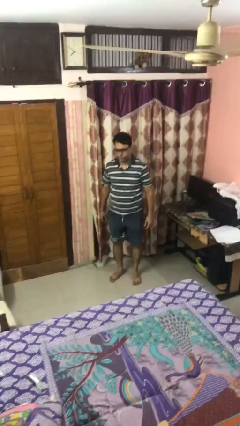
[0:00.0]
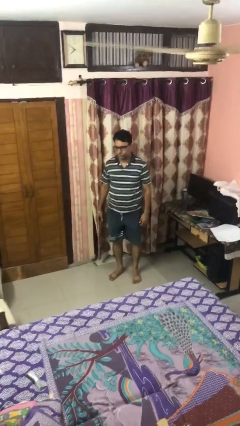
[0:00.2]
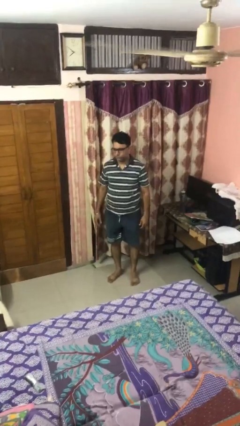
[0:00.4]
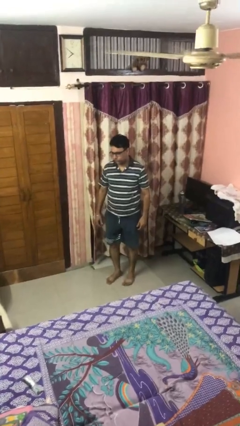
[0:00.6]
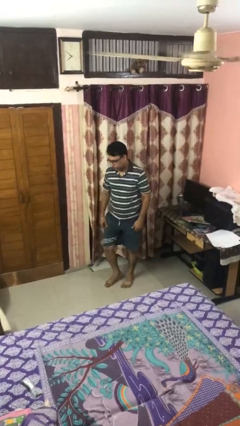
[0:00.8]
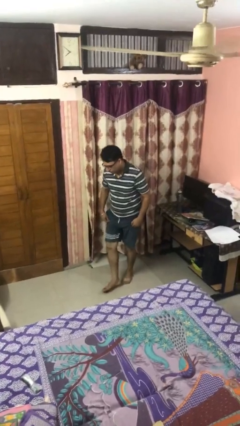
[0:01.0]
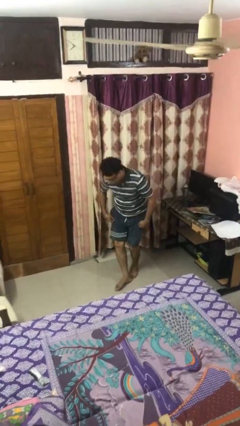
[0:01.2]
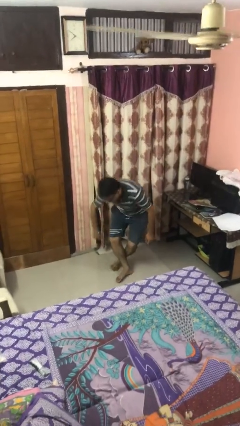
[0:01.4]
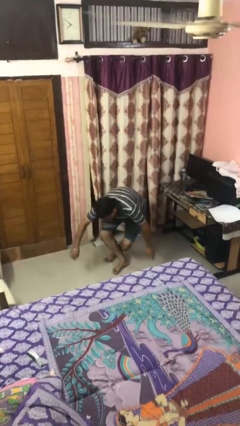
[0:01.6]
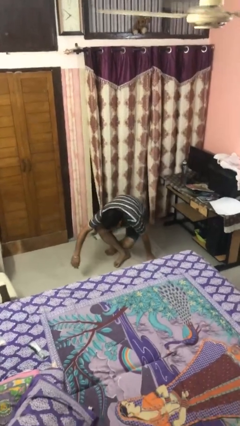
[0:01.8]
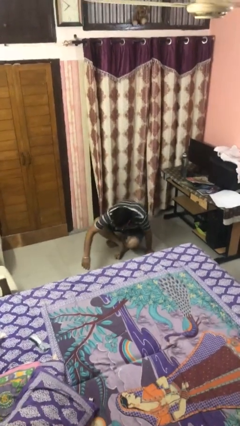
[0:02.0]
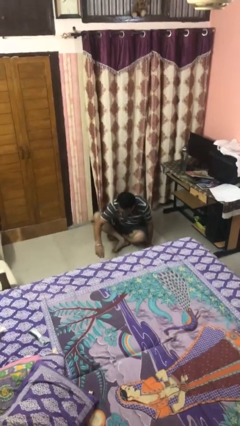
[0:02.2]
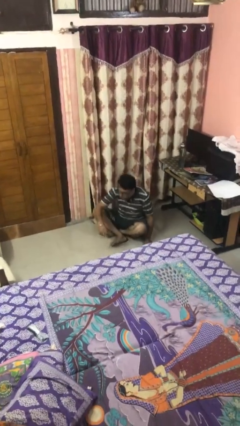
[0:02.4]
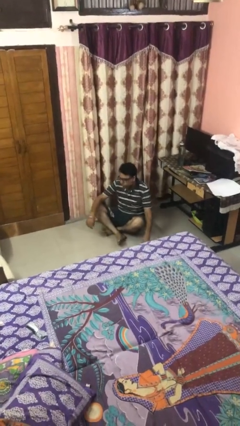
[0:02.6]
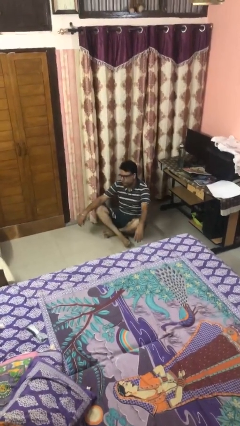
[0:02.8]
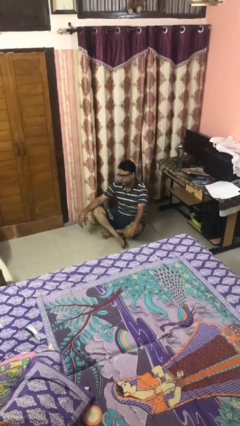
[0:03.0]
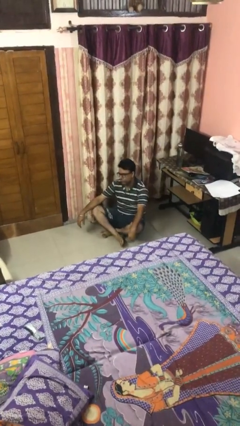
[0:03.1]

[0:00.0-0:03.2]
person sits crisscross

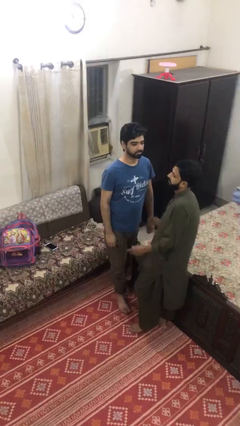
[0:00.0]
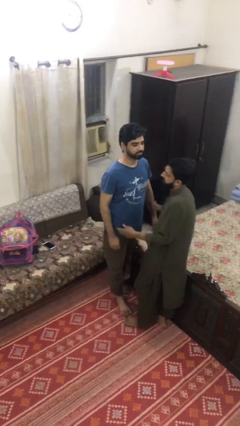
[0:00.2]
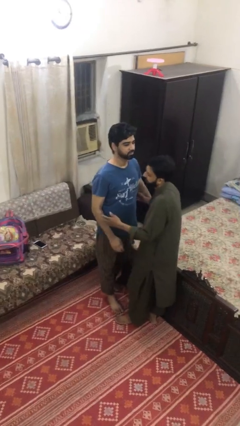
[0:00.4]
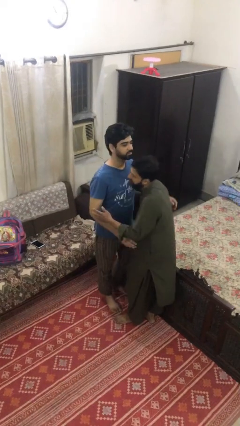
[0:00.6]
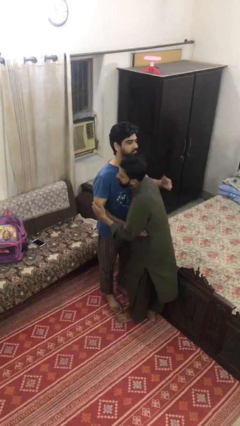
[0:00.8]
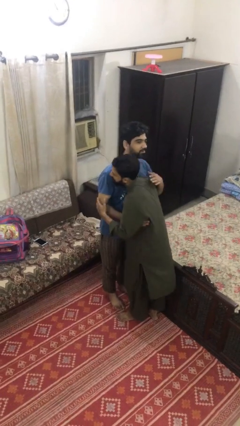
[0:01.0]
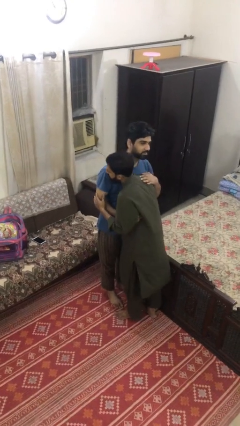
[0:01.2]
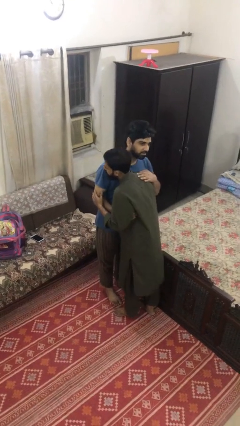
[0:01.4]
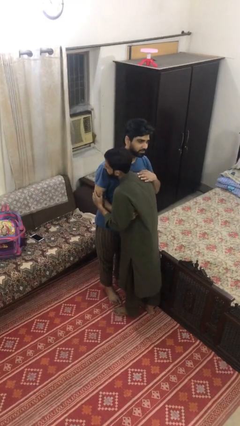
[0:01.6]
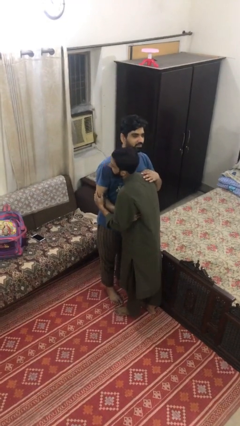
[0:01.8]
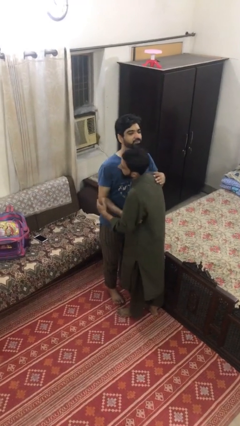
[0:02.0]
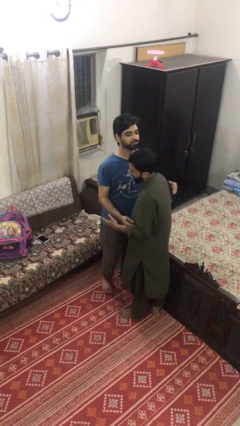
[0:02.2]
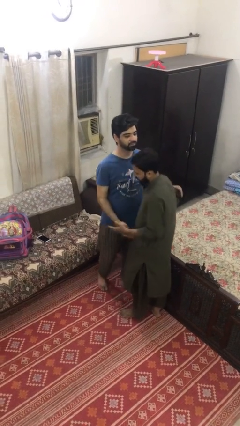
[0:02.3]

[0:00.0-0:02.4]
person embraces person

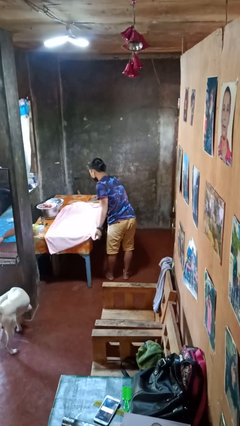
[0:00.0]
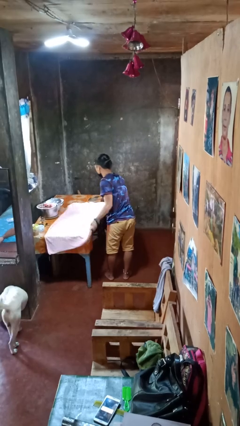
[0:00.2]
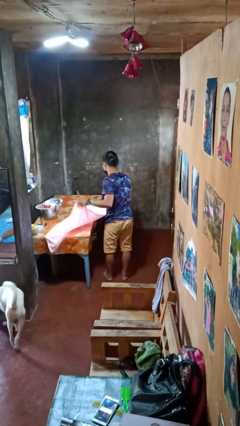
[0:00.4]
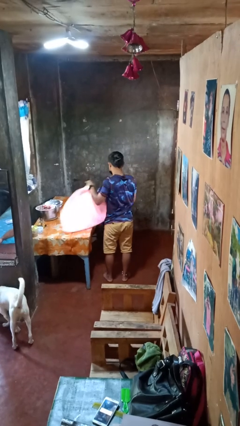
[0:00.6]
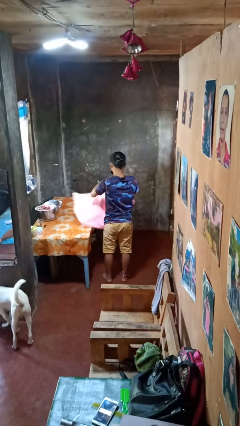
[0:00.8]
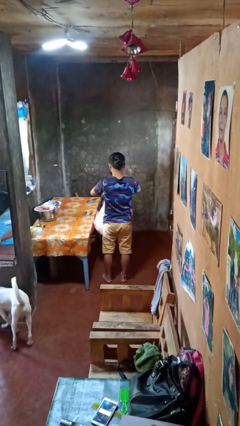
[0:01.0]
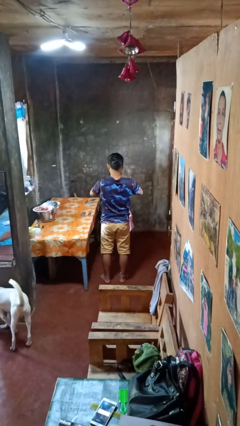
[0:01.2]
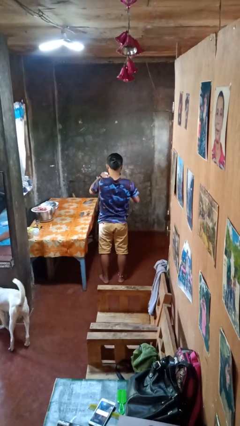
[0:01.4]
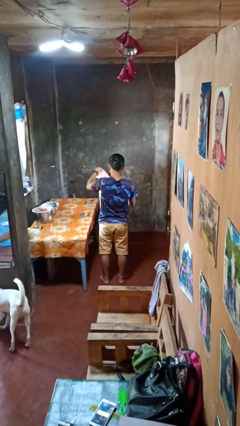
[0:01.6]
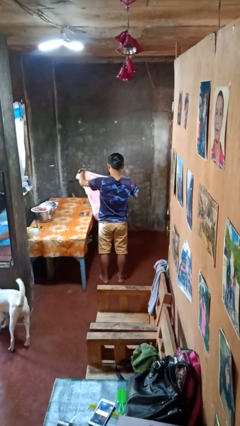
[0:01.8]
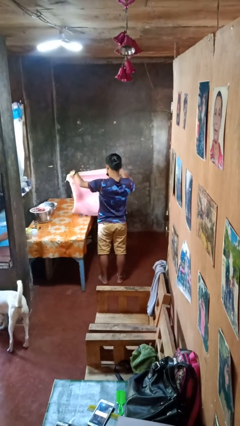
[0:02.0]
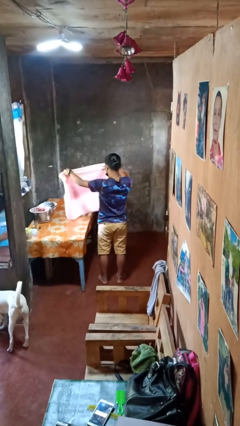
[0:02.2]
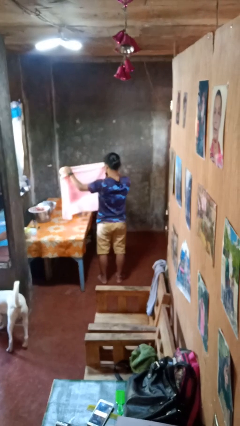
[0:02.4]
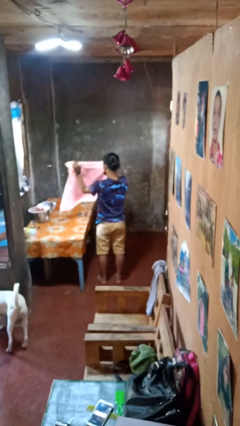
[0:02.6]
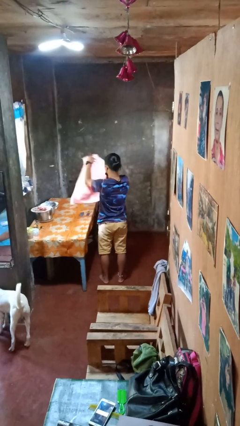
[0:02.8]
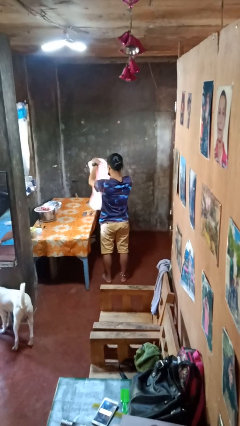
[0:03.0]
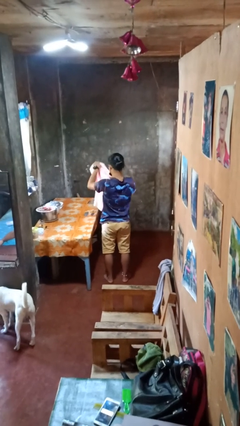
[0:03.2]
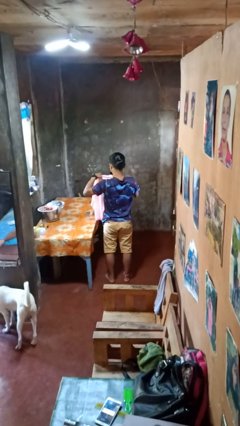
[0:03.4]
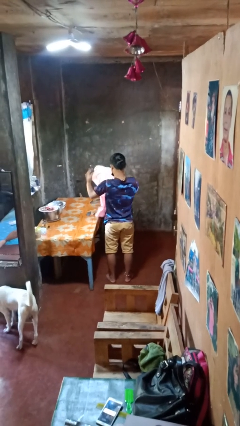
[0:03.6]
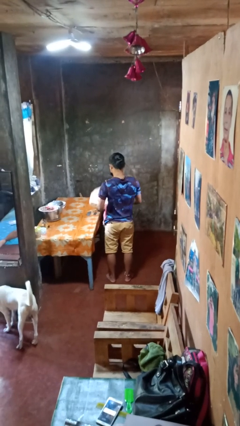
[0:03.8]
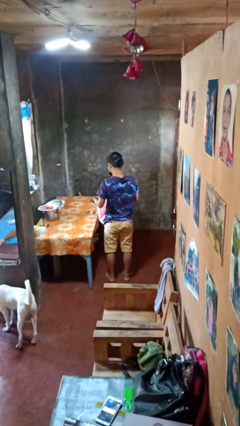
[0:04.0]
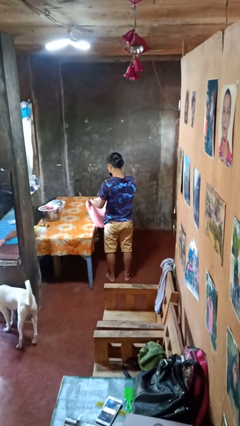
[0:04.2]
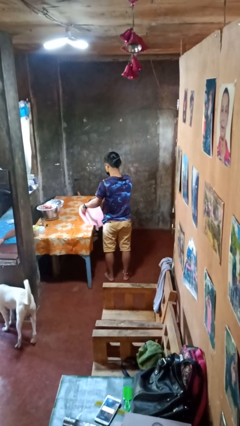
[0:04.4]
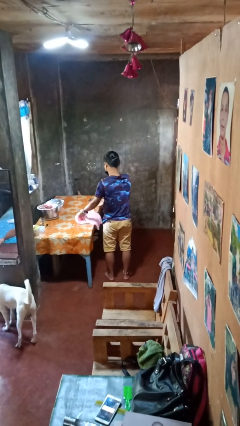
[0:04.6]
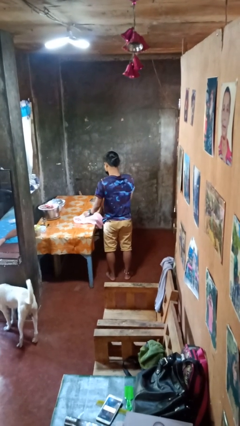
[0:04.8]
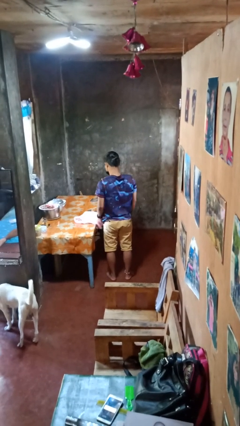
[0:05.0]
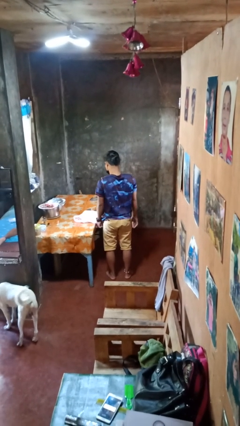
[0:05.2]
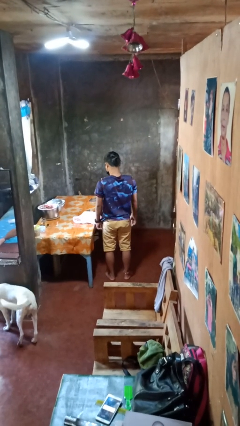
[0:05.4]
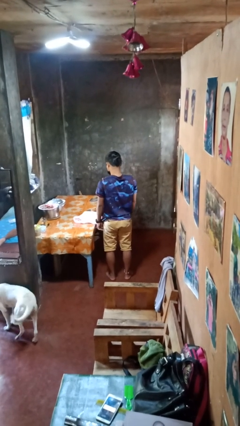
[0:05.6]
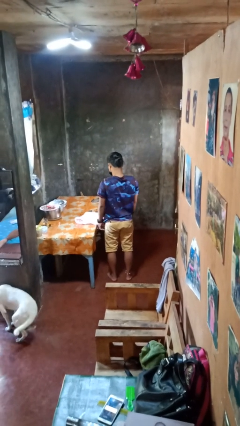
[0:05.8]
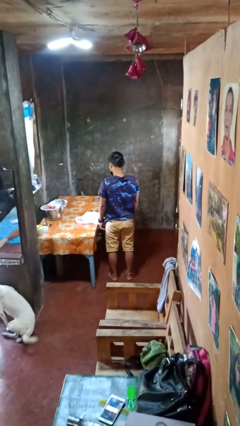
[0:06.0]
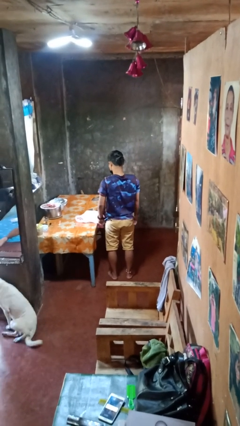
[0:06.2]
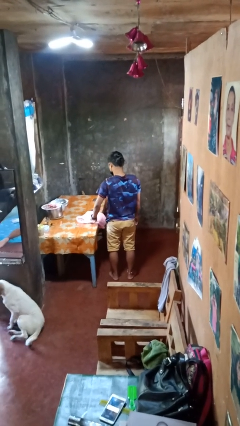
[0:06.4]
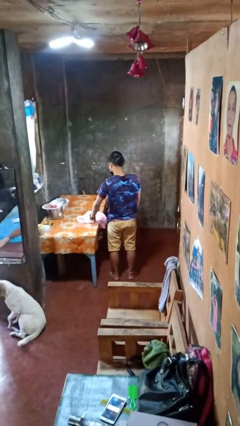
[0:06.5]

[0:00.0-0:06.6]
person folds tablecloth

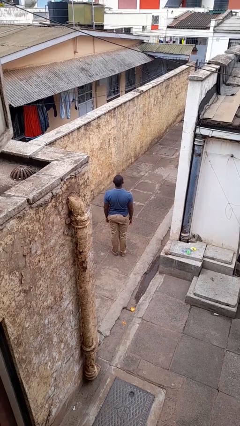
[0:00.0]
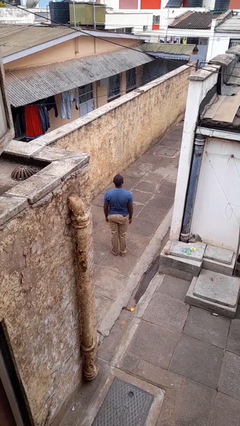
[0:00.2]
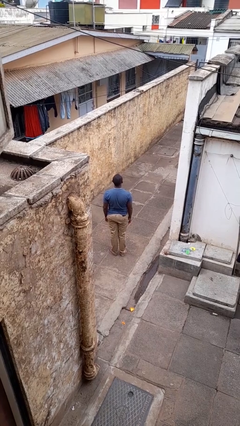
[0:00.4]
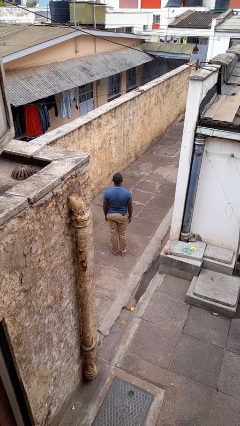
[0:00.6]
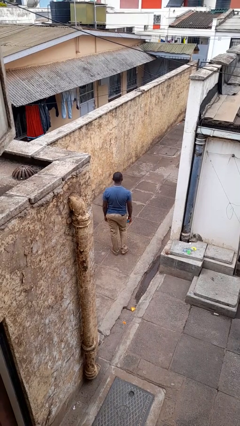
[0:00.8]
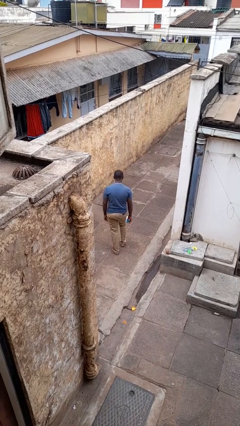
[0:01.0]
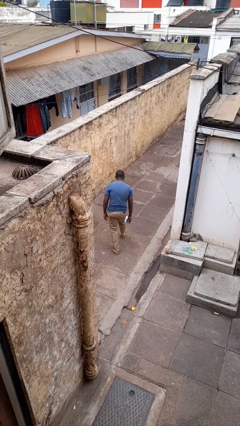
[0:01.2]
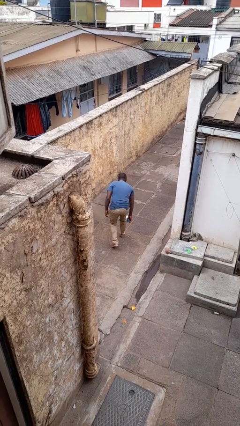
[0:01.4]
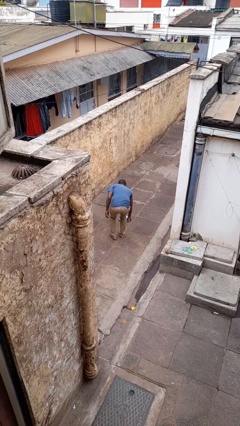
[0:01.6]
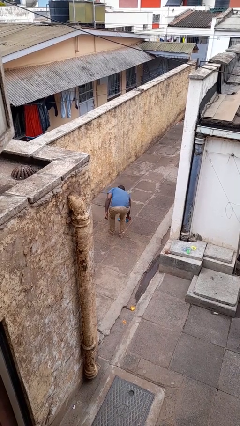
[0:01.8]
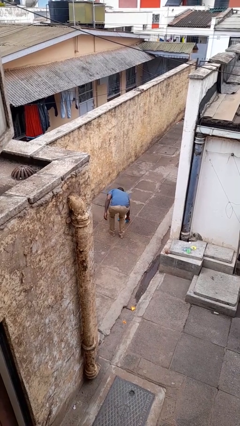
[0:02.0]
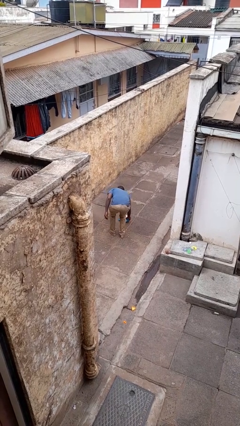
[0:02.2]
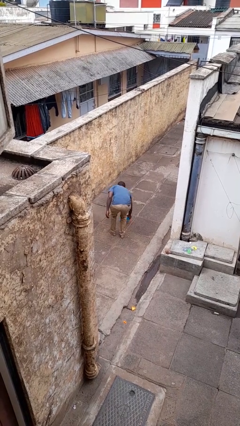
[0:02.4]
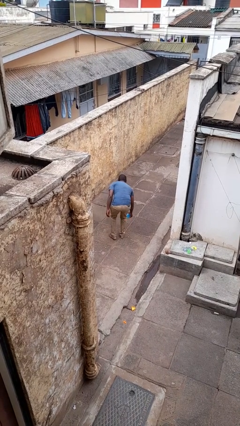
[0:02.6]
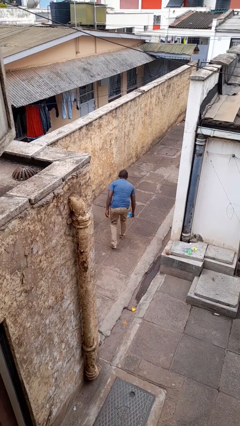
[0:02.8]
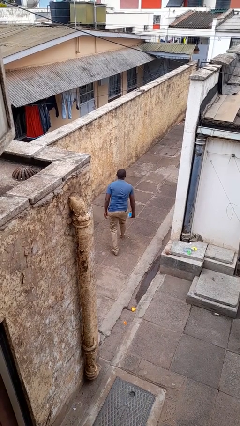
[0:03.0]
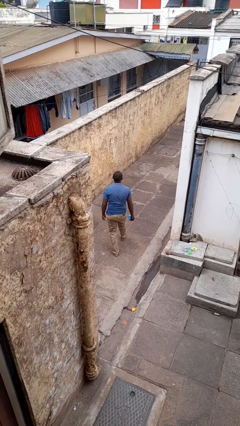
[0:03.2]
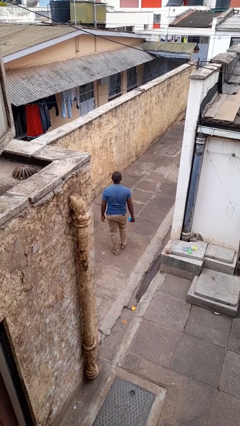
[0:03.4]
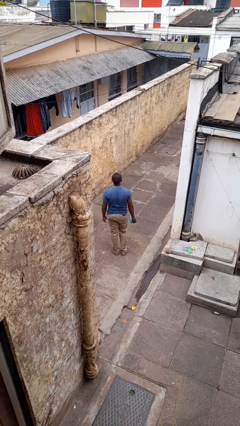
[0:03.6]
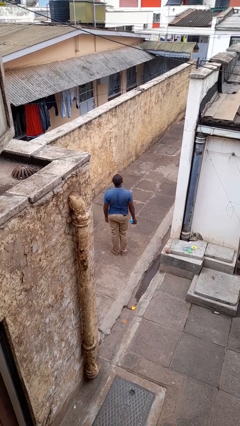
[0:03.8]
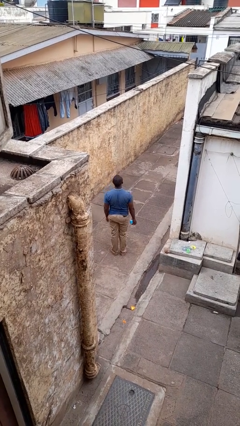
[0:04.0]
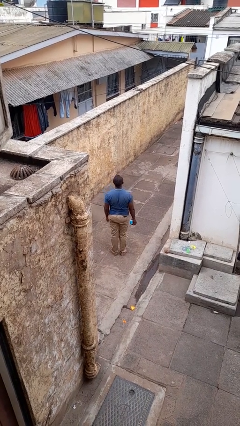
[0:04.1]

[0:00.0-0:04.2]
person picks up object from floor

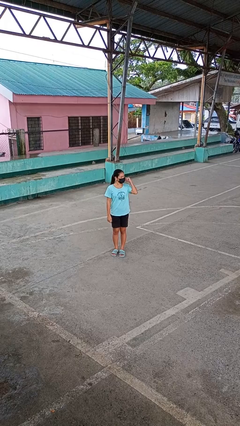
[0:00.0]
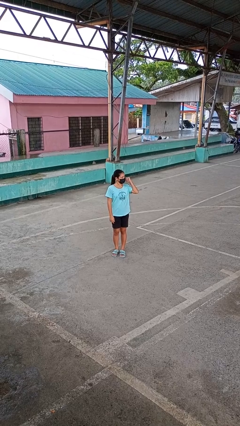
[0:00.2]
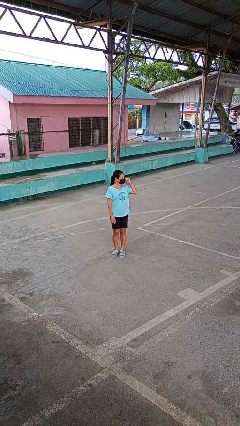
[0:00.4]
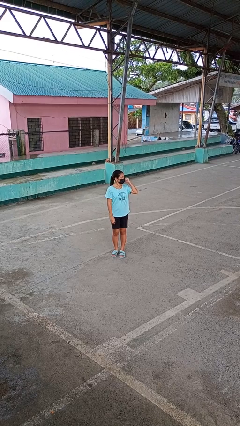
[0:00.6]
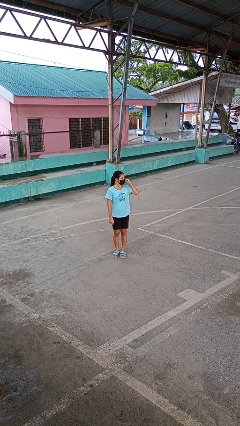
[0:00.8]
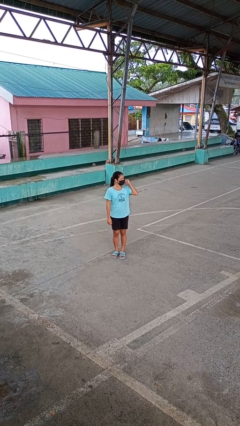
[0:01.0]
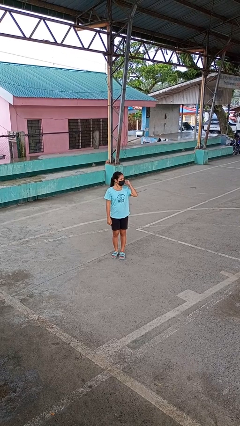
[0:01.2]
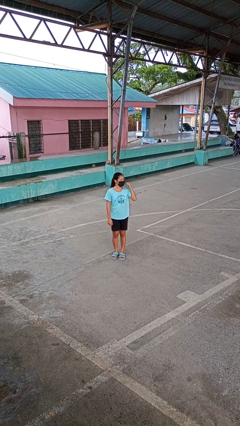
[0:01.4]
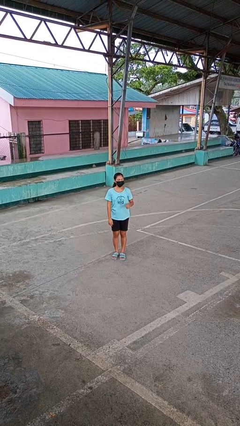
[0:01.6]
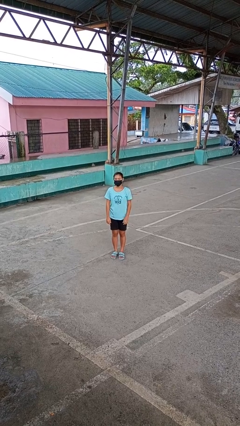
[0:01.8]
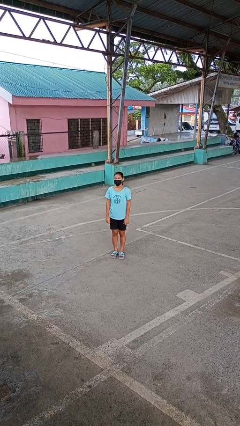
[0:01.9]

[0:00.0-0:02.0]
person gestures behind me
